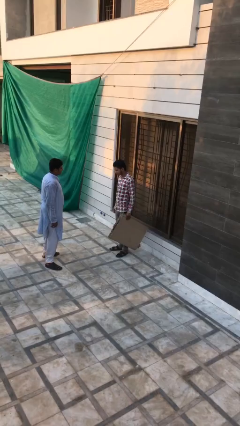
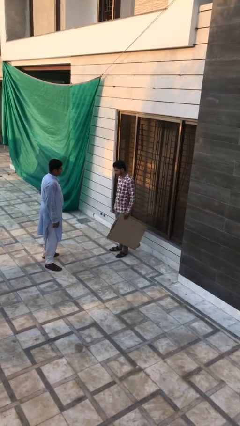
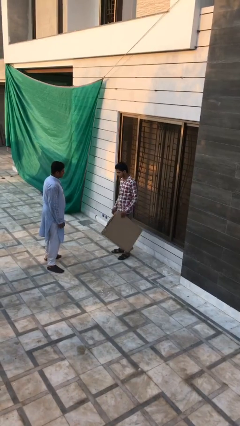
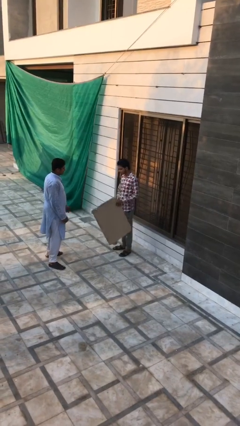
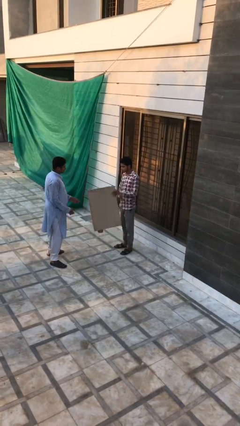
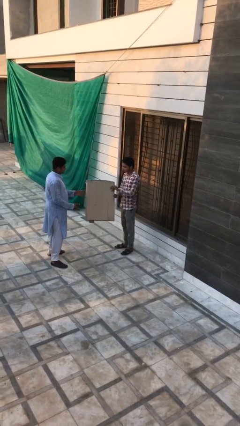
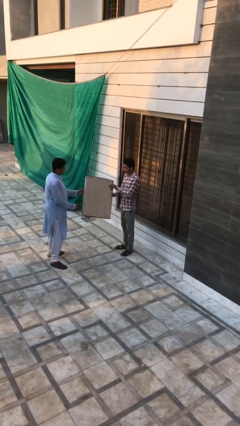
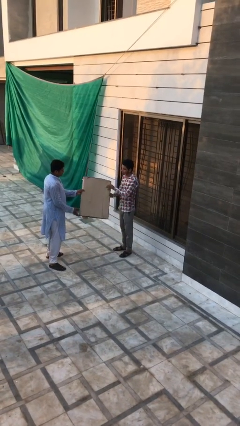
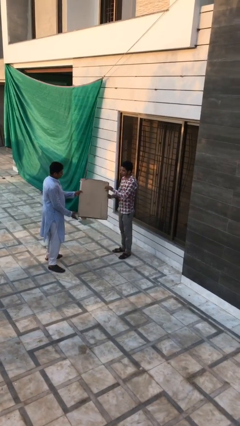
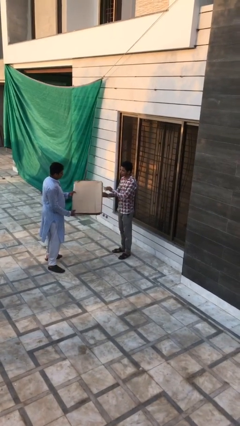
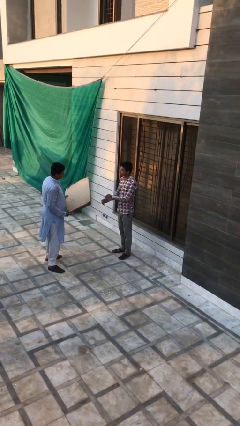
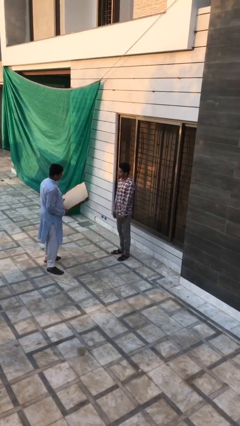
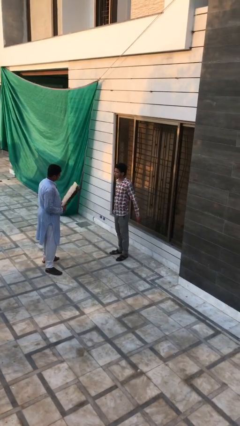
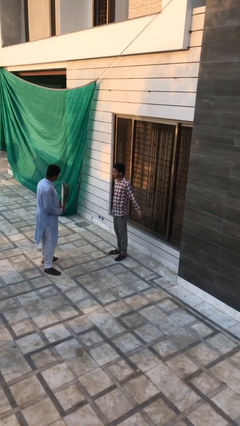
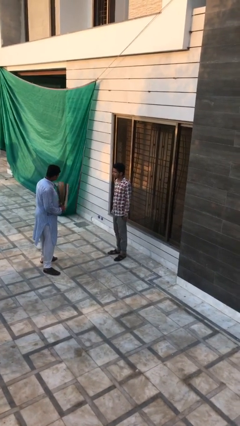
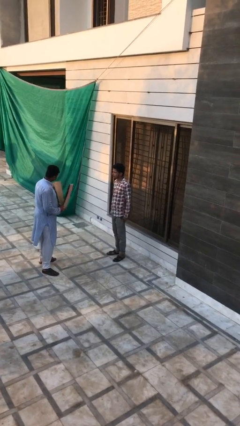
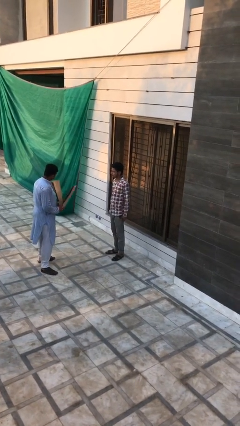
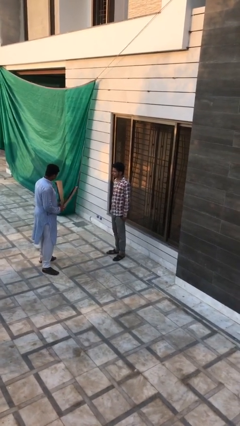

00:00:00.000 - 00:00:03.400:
person transfers object to person

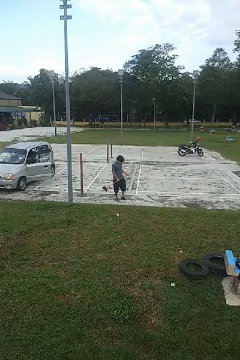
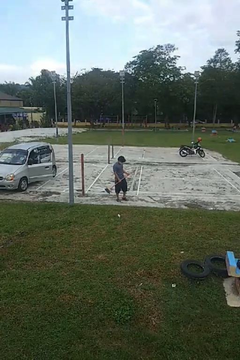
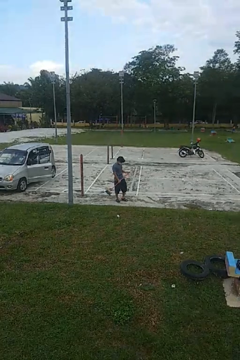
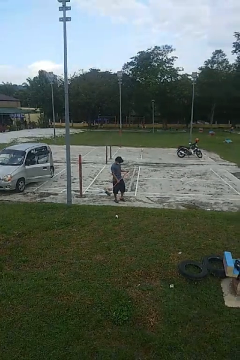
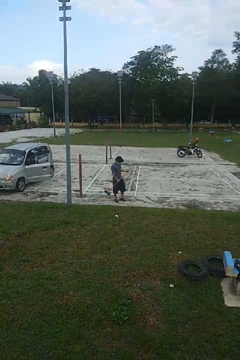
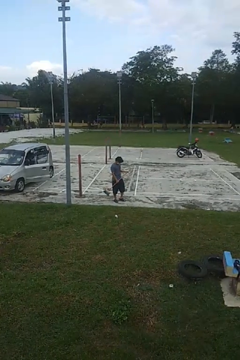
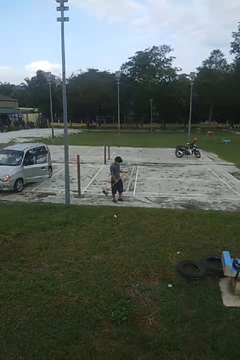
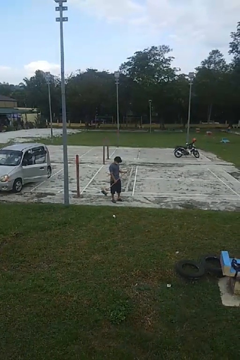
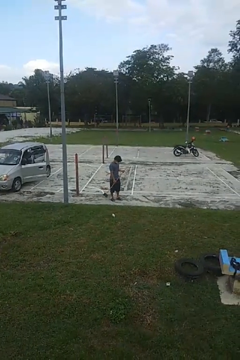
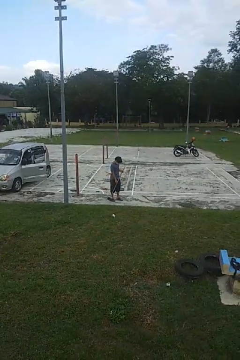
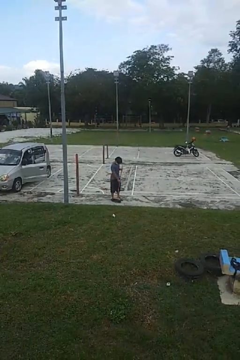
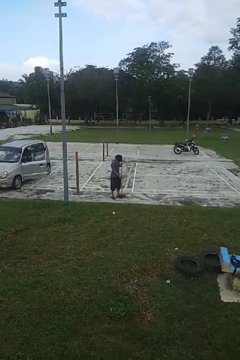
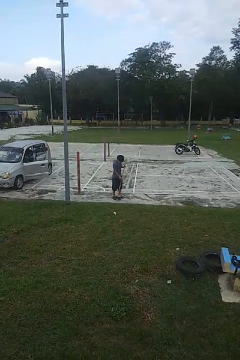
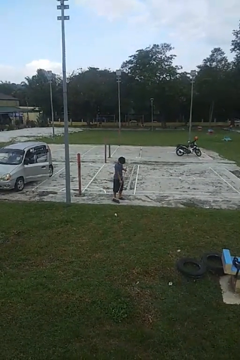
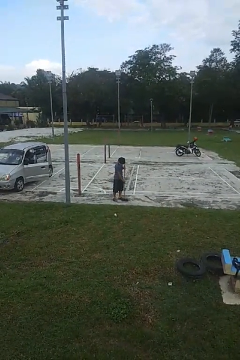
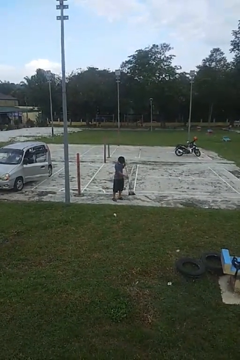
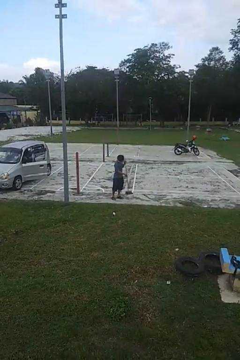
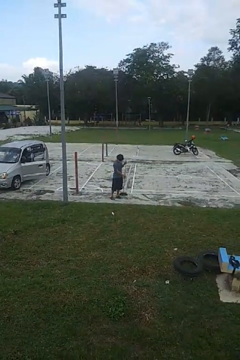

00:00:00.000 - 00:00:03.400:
person sweeps floor

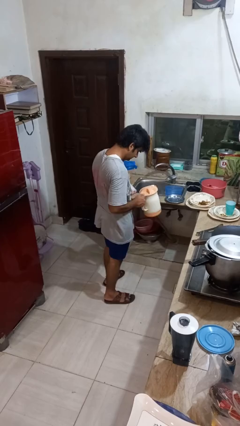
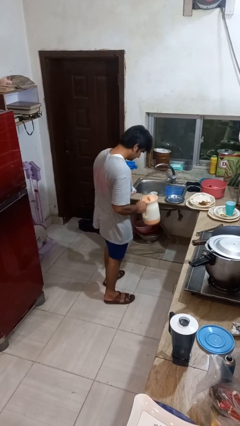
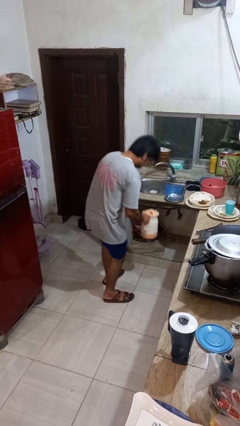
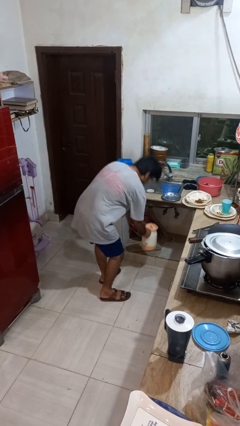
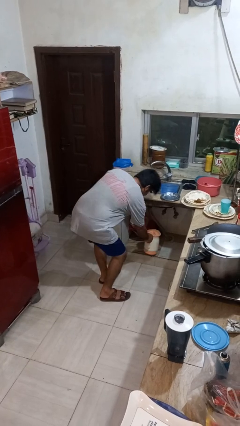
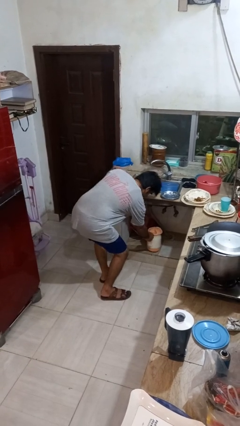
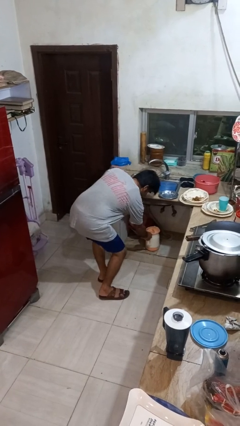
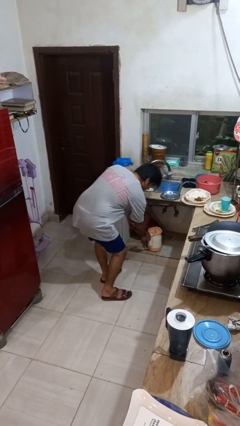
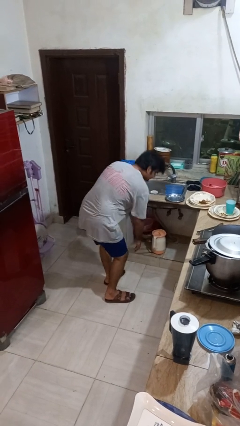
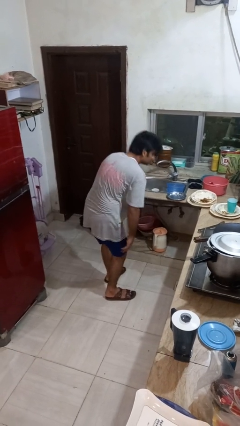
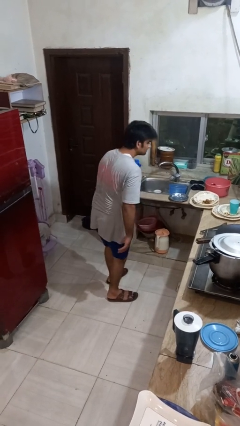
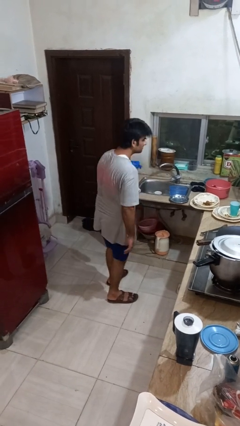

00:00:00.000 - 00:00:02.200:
person puts down object into cabinet

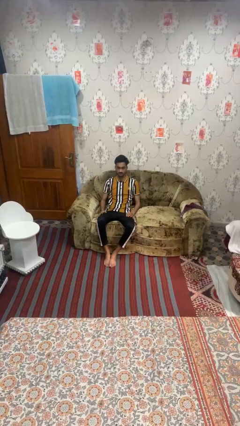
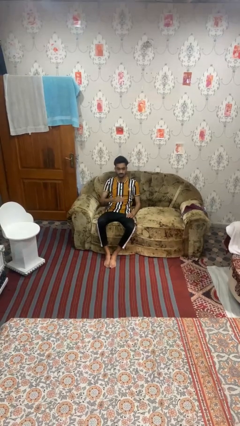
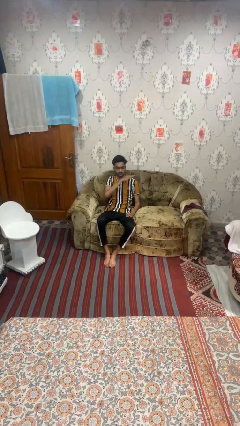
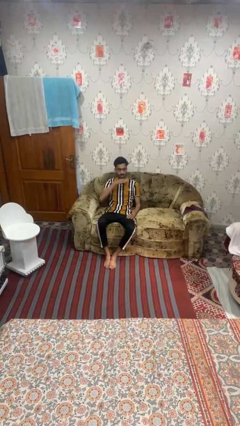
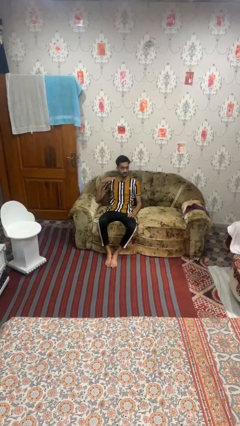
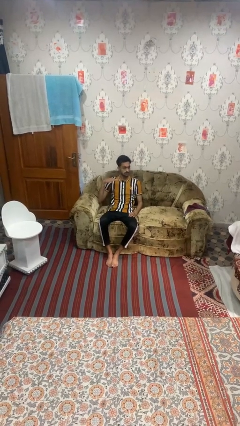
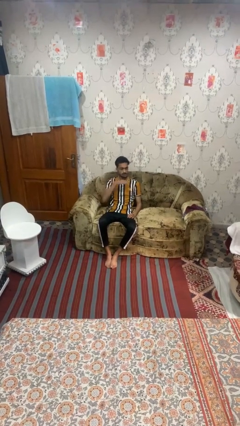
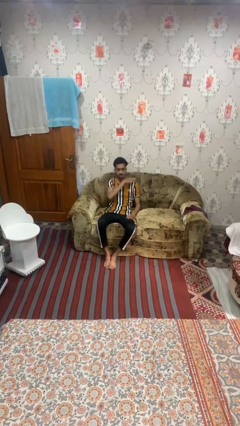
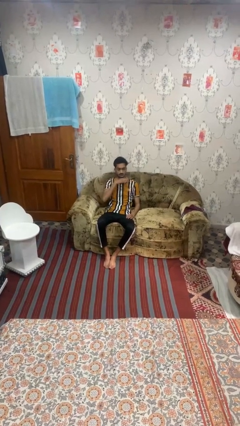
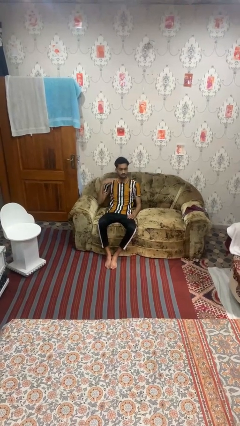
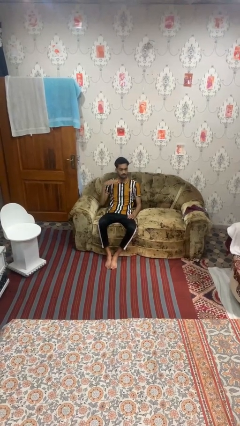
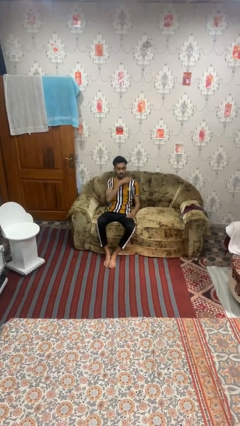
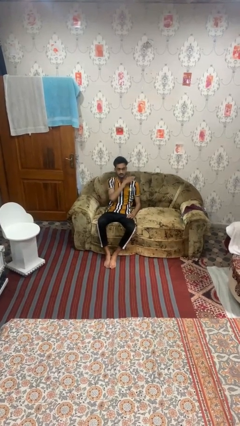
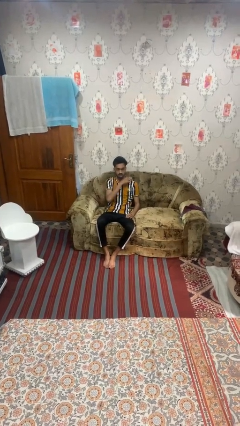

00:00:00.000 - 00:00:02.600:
person gestures cut

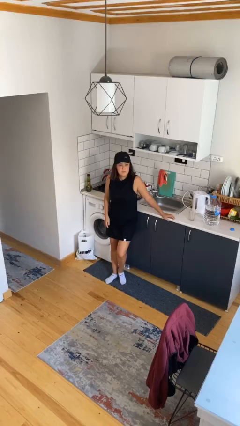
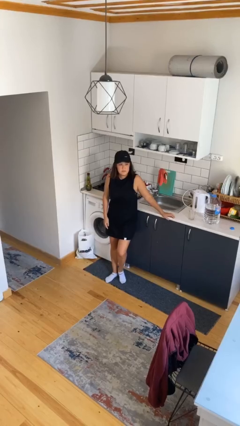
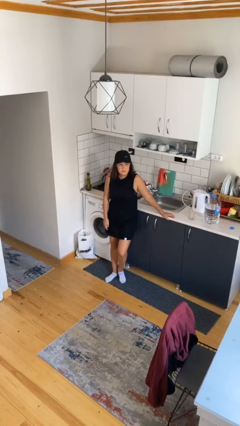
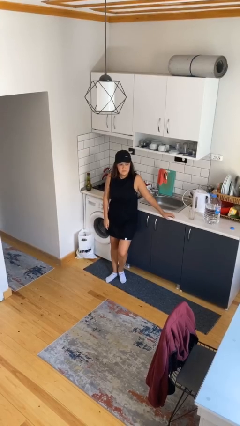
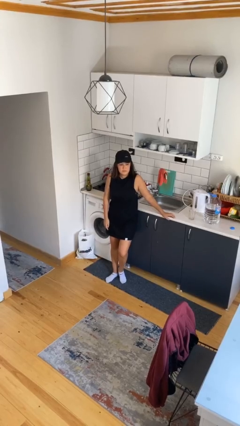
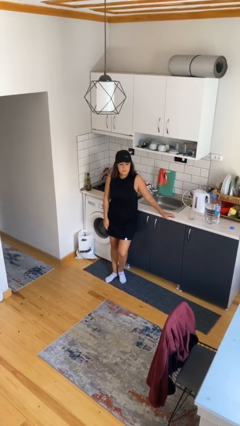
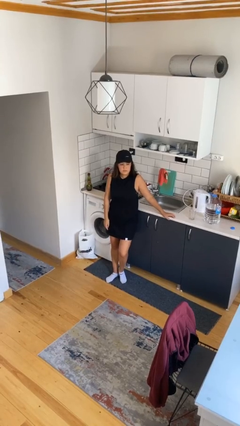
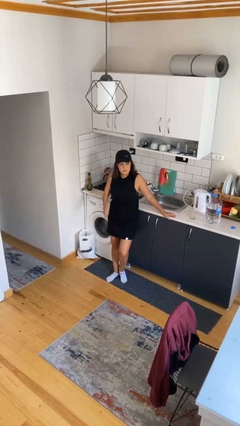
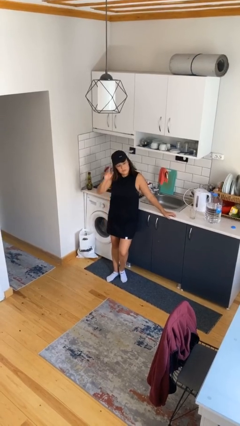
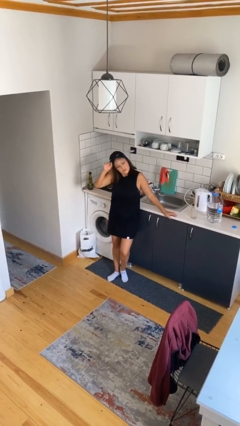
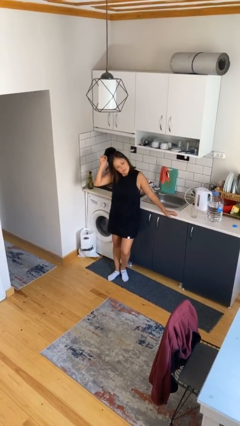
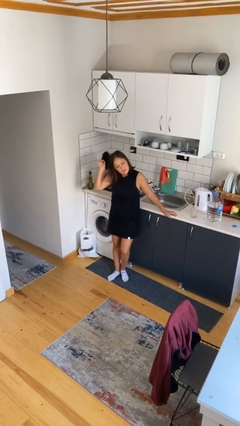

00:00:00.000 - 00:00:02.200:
person takes off hat

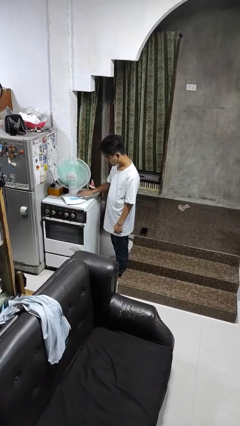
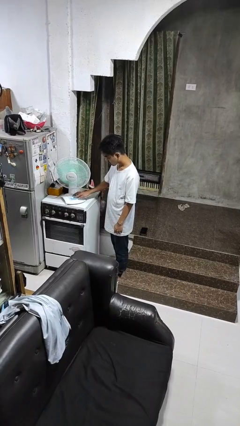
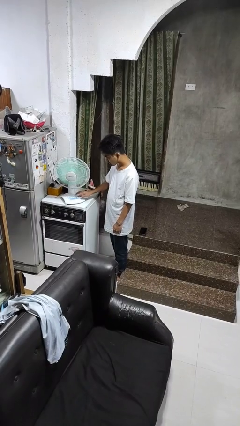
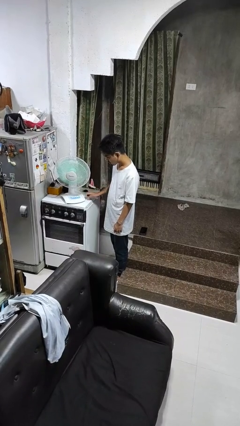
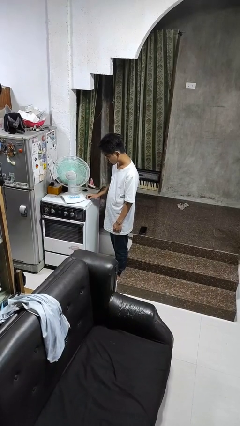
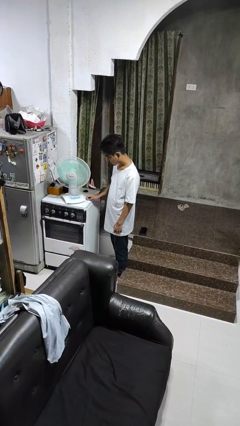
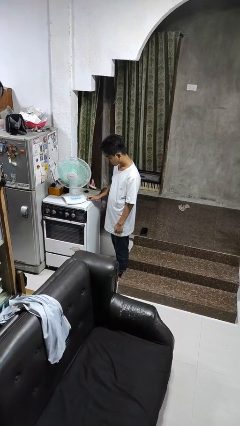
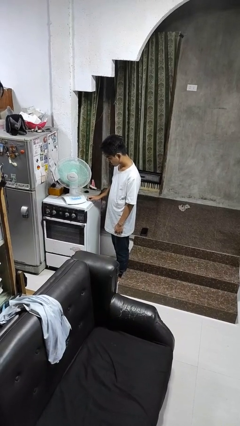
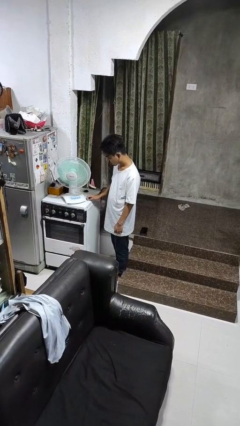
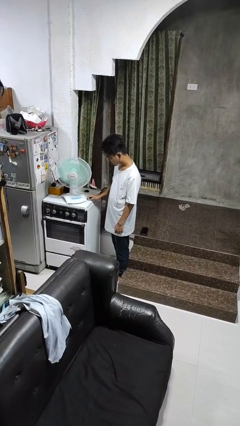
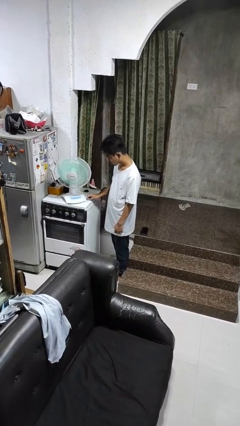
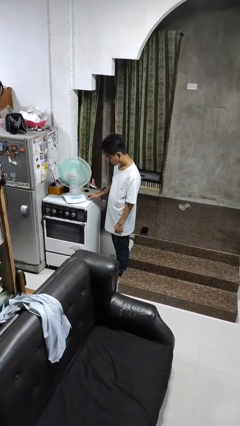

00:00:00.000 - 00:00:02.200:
person turns on fan

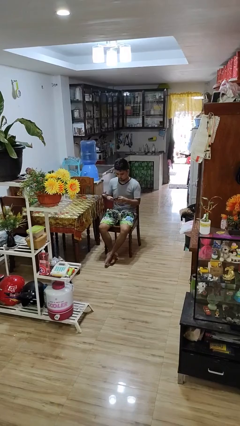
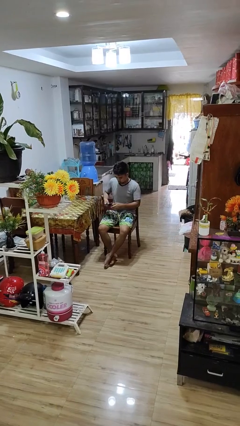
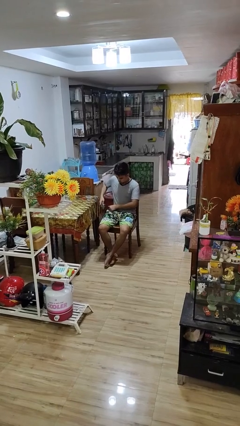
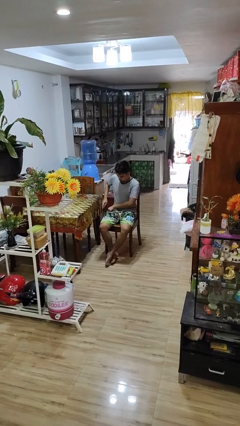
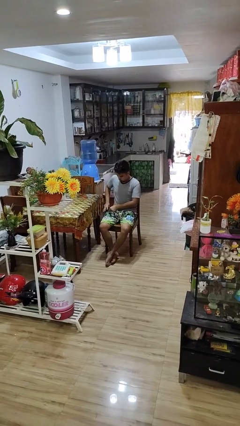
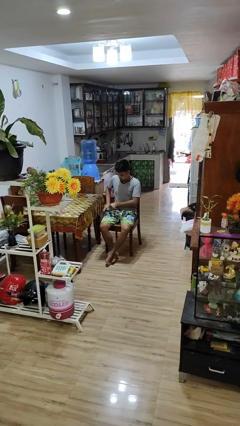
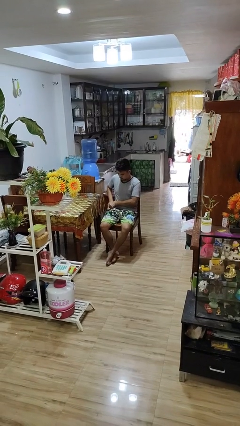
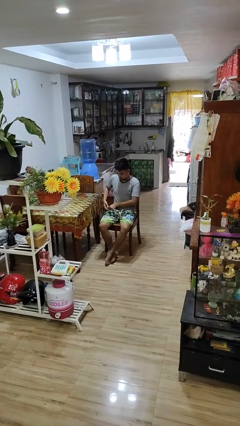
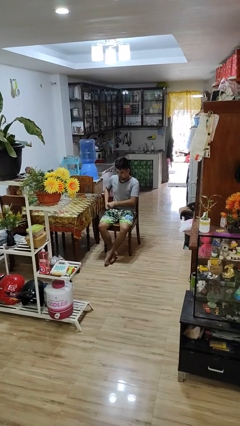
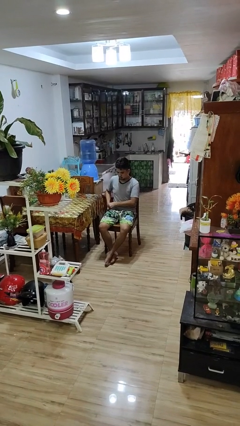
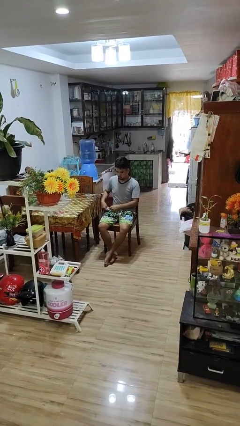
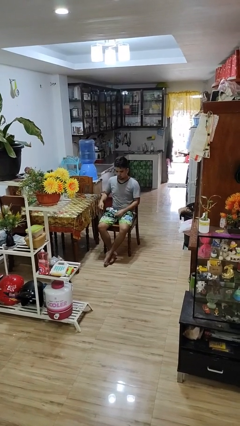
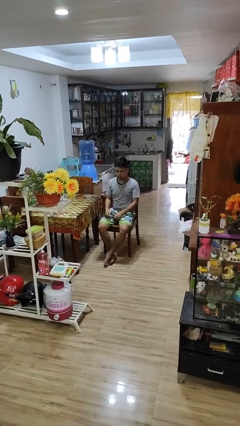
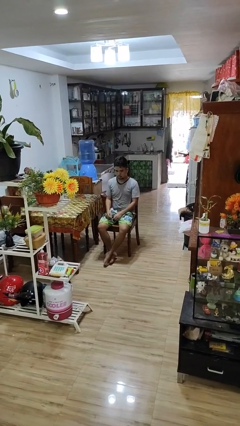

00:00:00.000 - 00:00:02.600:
person puts phone into pocket
